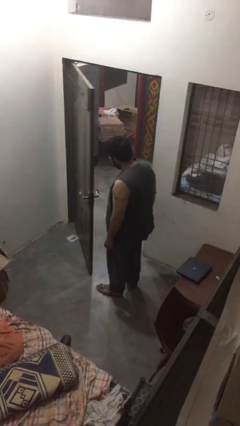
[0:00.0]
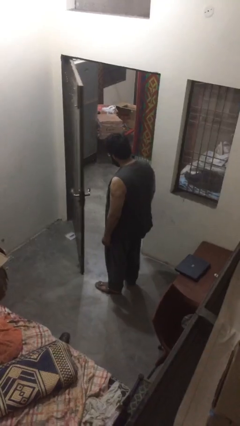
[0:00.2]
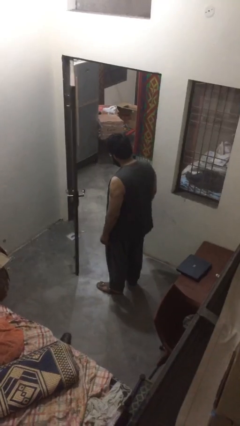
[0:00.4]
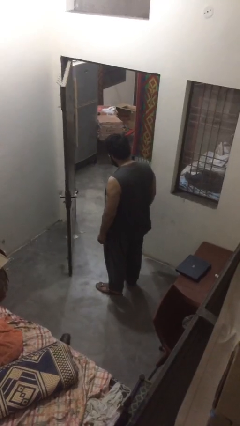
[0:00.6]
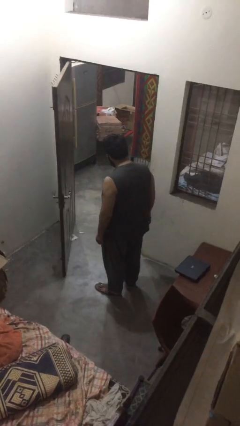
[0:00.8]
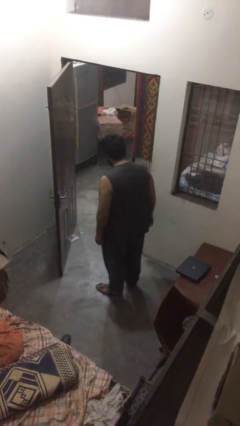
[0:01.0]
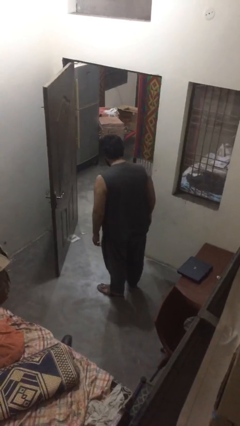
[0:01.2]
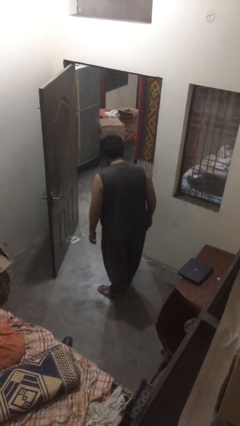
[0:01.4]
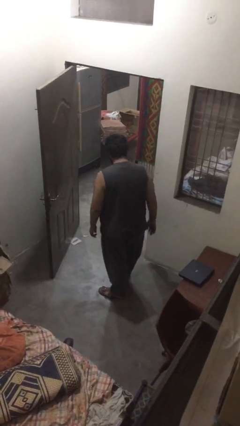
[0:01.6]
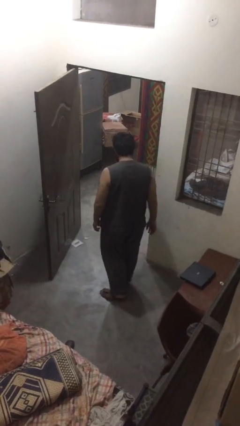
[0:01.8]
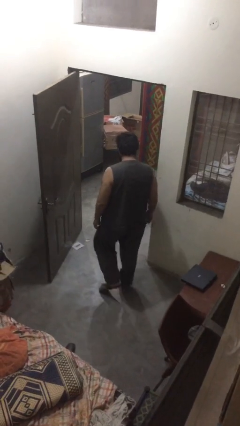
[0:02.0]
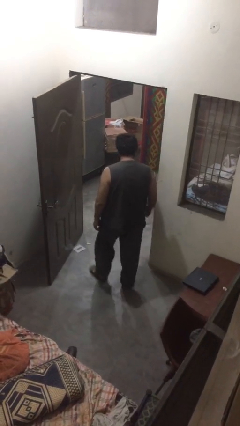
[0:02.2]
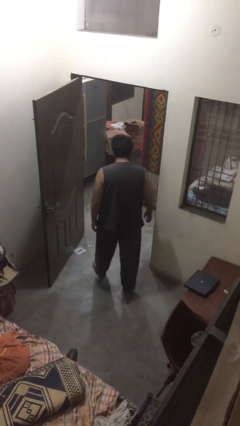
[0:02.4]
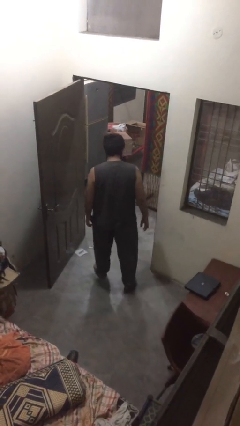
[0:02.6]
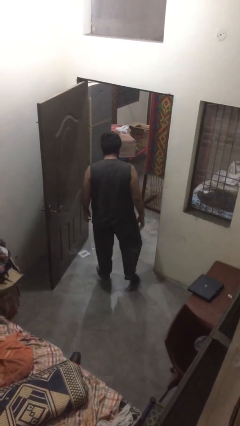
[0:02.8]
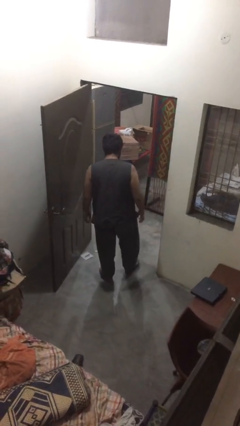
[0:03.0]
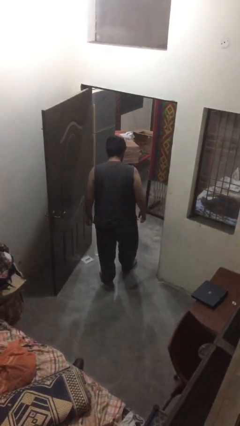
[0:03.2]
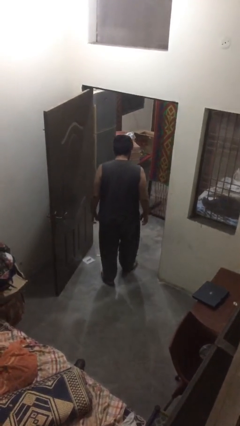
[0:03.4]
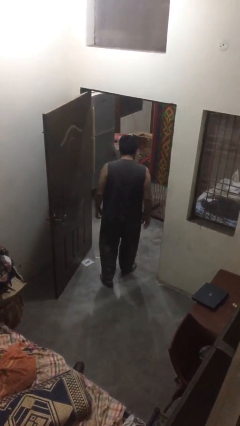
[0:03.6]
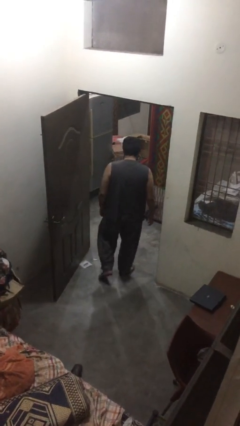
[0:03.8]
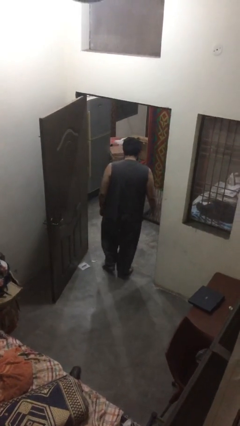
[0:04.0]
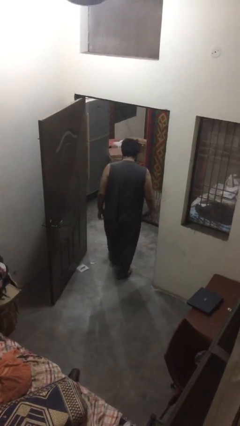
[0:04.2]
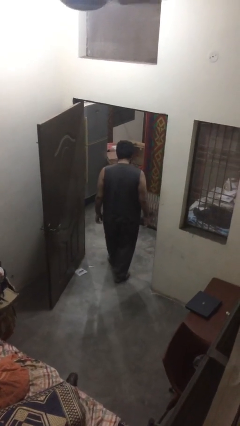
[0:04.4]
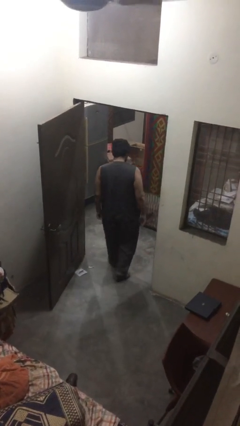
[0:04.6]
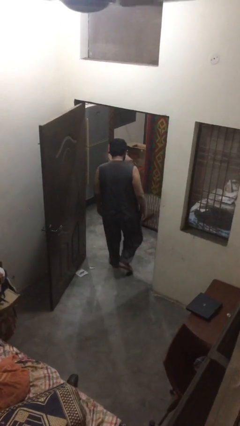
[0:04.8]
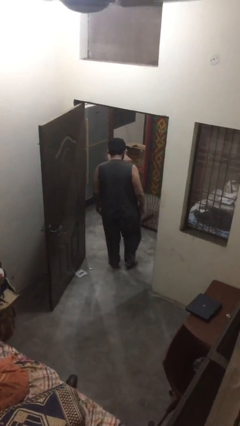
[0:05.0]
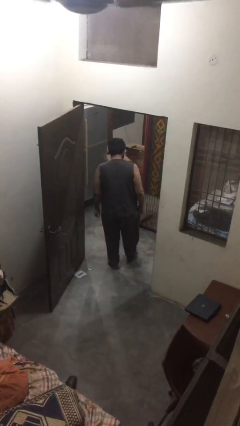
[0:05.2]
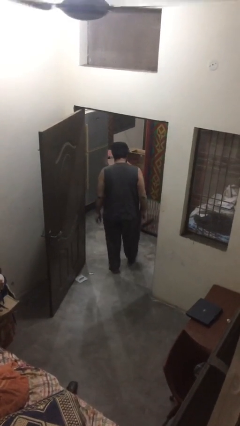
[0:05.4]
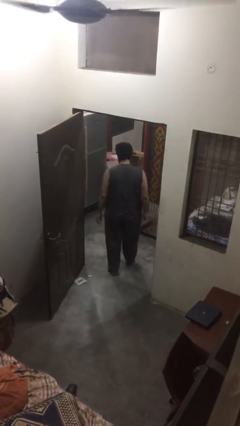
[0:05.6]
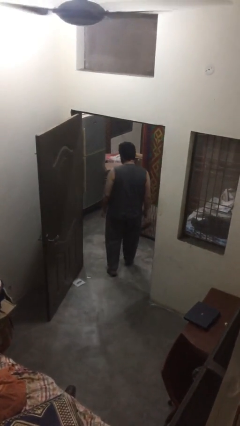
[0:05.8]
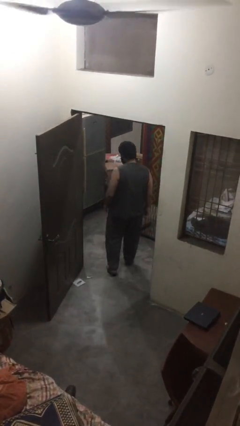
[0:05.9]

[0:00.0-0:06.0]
person exits scene through structure

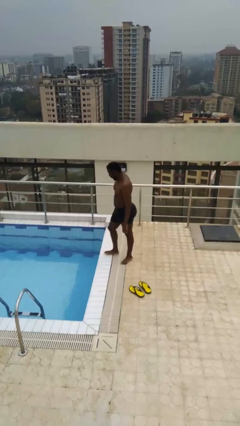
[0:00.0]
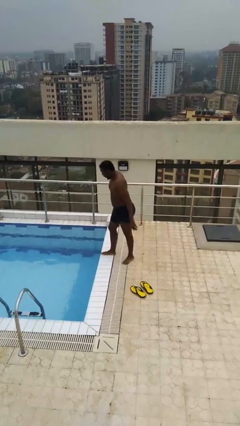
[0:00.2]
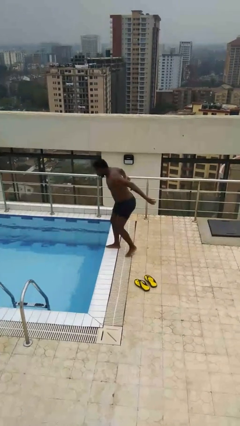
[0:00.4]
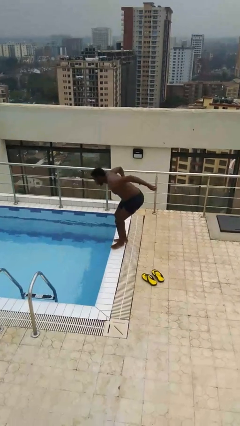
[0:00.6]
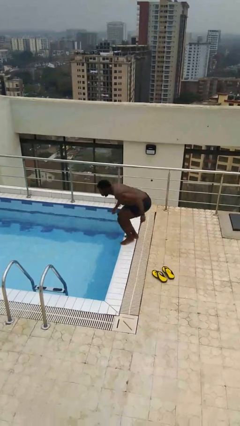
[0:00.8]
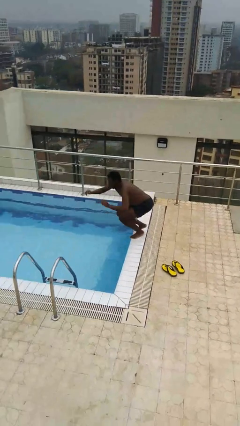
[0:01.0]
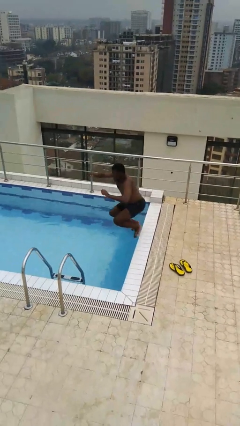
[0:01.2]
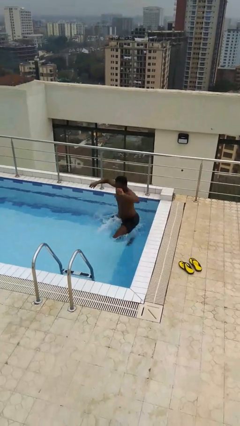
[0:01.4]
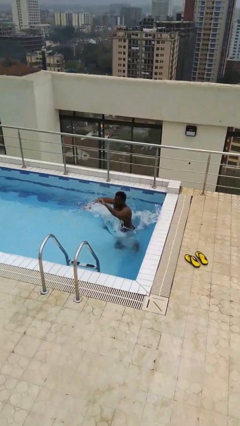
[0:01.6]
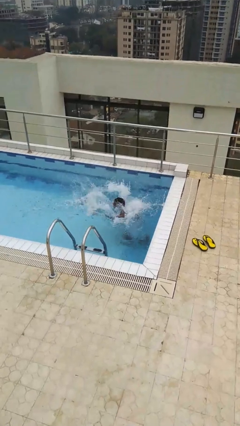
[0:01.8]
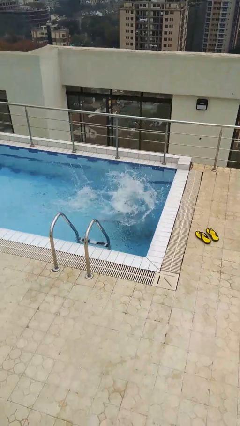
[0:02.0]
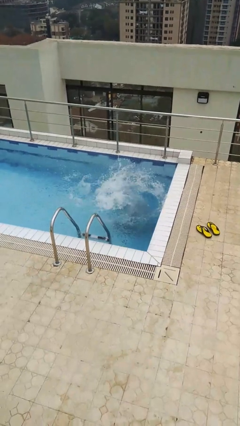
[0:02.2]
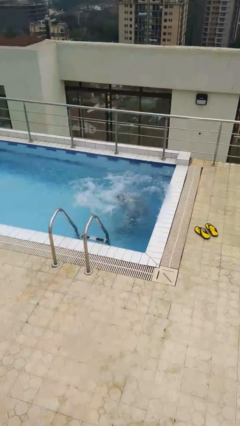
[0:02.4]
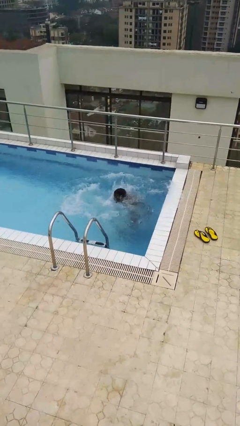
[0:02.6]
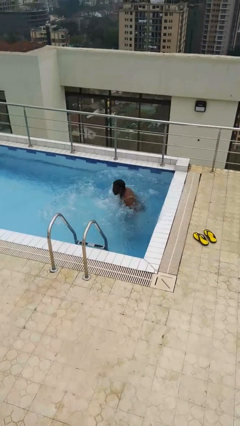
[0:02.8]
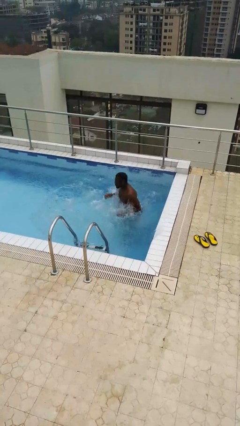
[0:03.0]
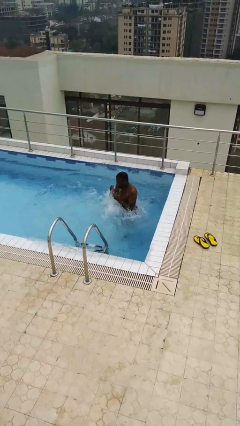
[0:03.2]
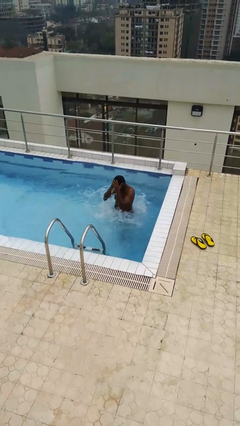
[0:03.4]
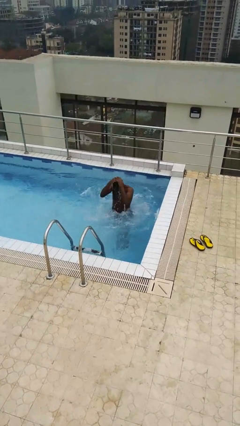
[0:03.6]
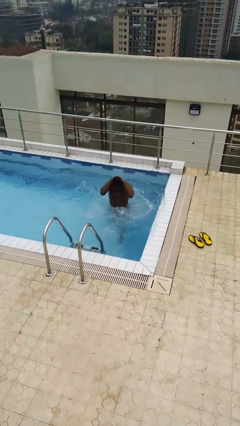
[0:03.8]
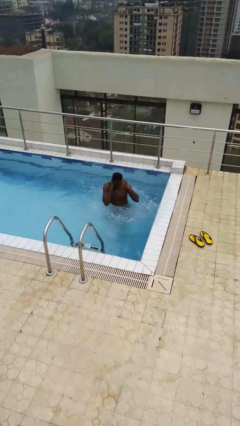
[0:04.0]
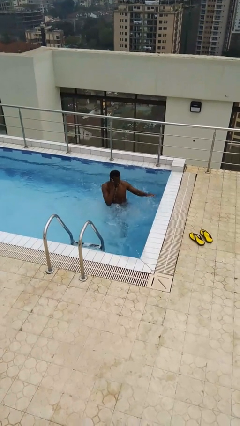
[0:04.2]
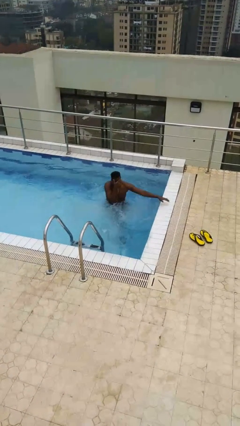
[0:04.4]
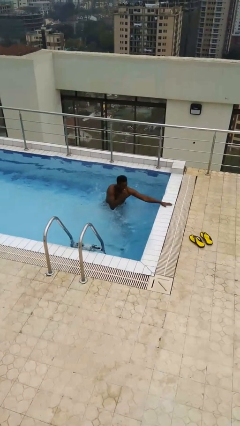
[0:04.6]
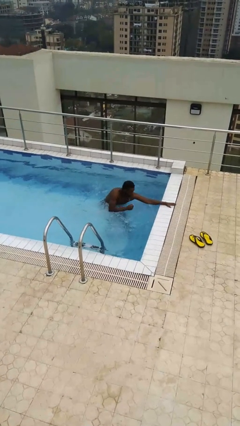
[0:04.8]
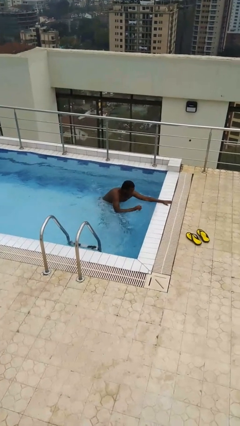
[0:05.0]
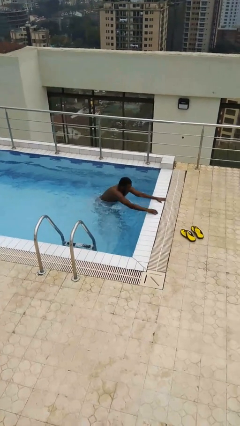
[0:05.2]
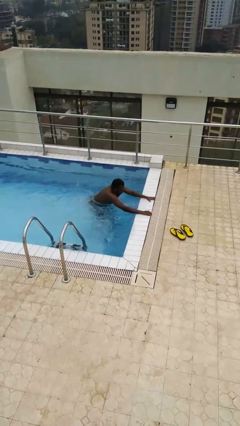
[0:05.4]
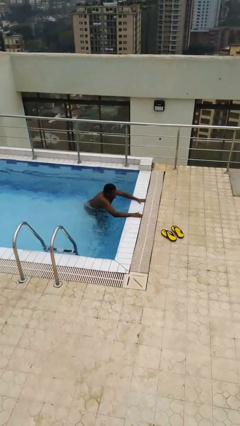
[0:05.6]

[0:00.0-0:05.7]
person jumps into pool

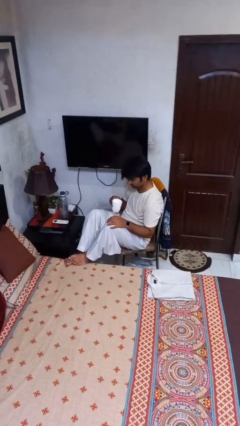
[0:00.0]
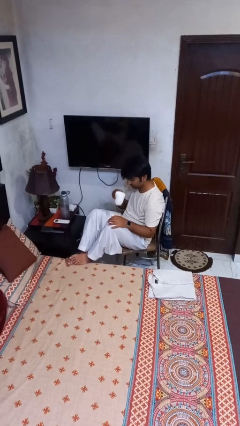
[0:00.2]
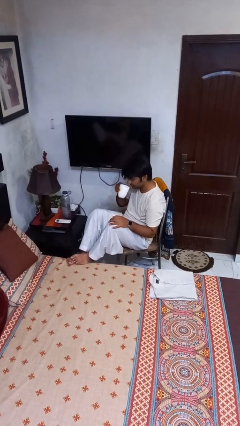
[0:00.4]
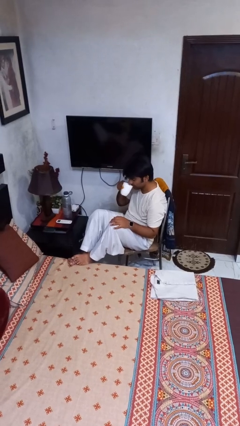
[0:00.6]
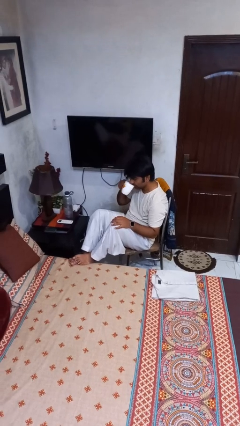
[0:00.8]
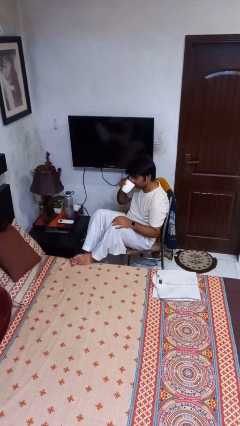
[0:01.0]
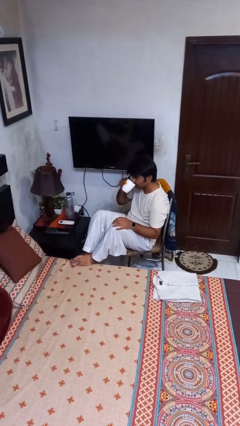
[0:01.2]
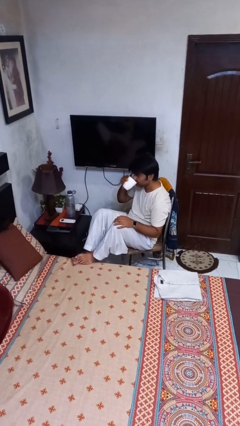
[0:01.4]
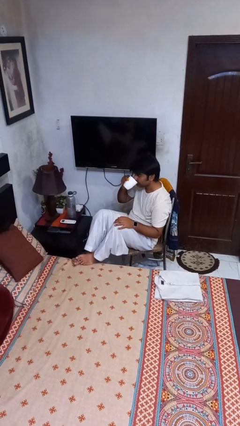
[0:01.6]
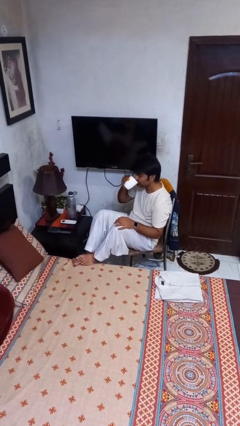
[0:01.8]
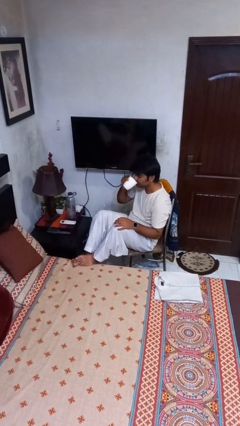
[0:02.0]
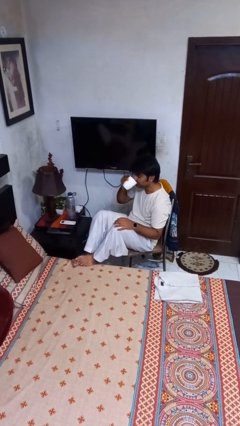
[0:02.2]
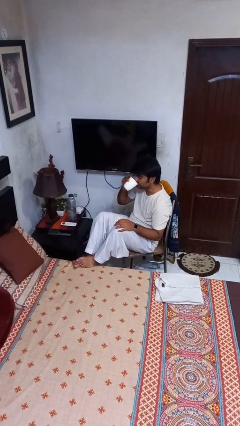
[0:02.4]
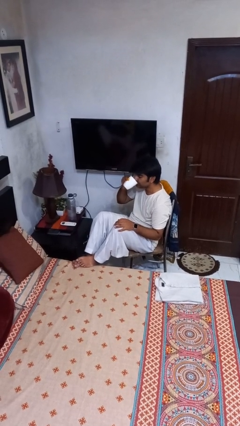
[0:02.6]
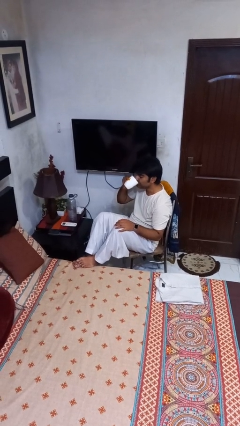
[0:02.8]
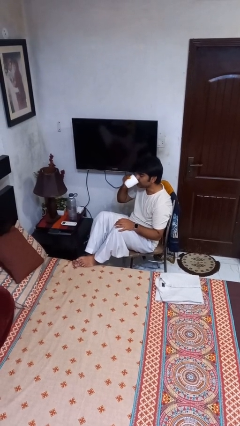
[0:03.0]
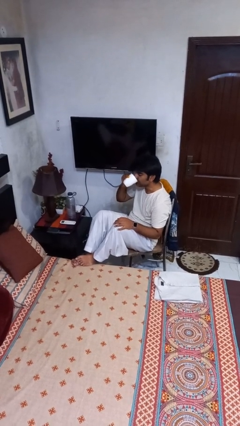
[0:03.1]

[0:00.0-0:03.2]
person drinks from mug

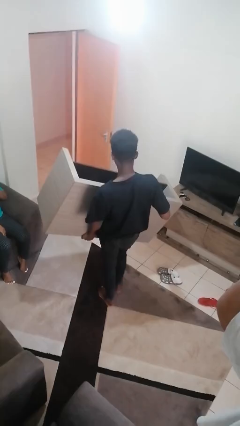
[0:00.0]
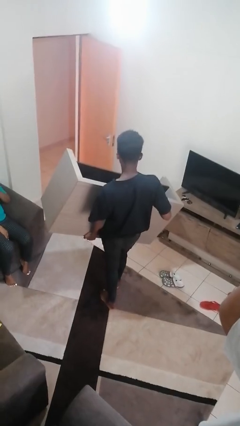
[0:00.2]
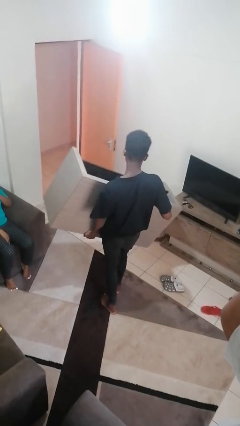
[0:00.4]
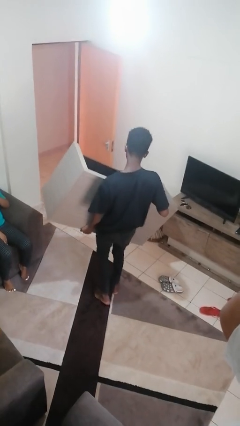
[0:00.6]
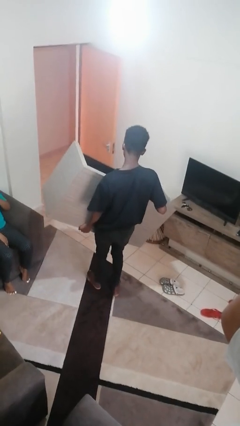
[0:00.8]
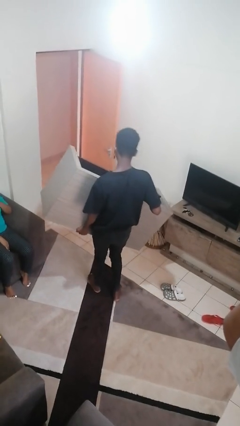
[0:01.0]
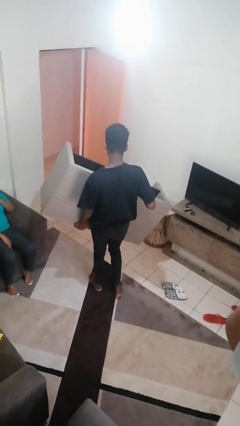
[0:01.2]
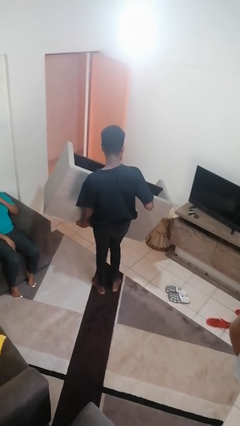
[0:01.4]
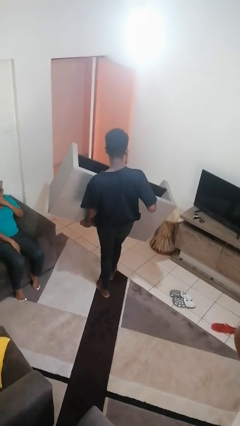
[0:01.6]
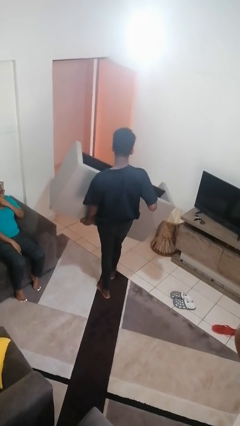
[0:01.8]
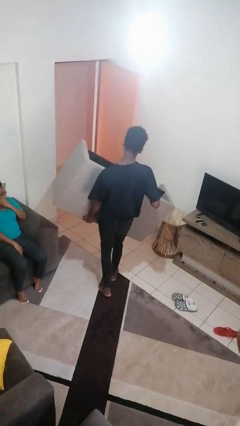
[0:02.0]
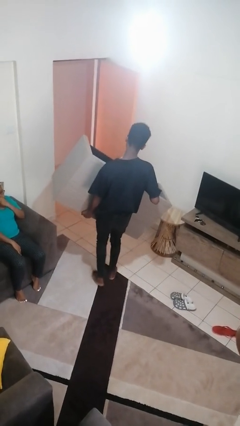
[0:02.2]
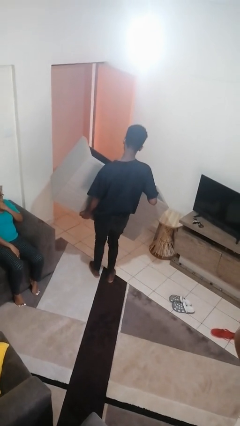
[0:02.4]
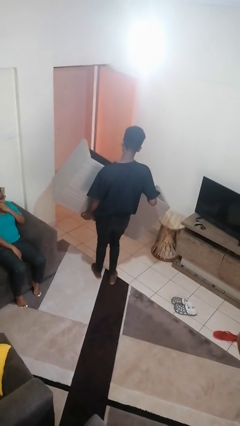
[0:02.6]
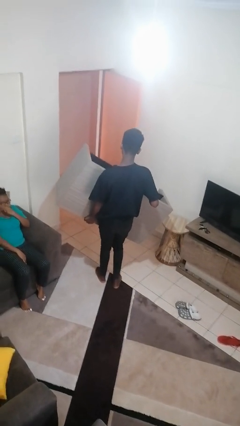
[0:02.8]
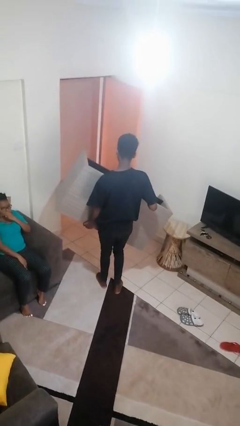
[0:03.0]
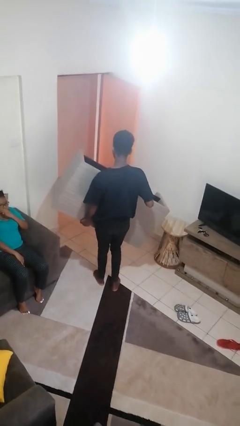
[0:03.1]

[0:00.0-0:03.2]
person carries furniture
